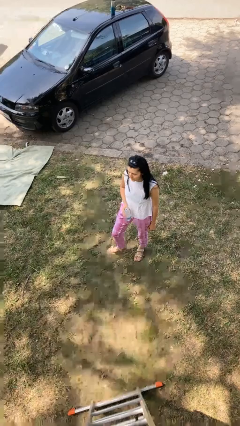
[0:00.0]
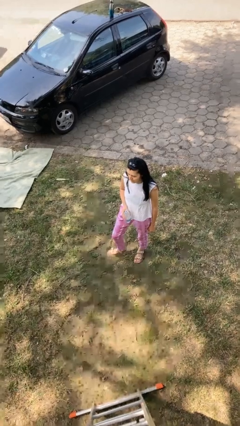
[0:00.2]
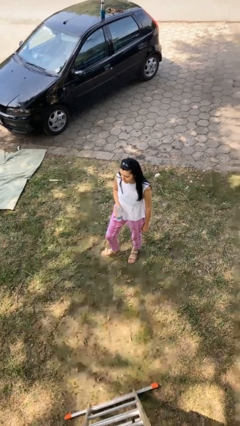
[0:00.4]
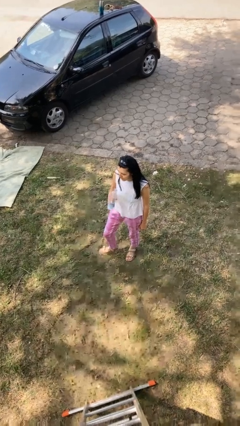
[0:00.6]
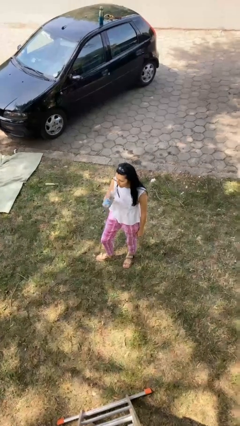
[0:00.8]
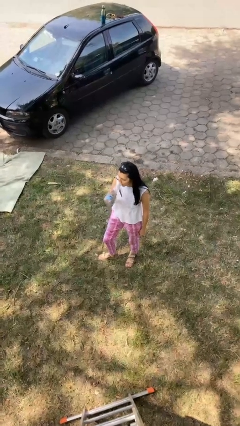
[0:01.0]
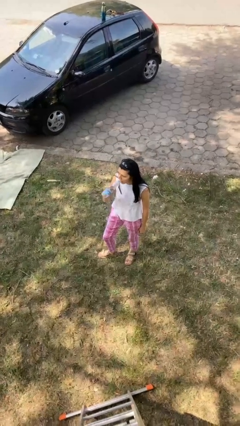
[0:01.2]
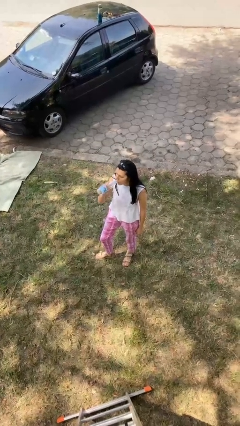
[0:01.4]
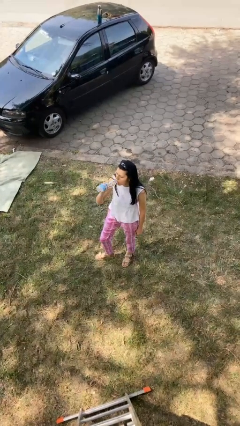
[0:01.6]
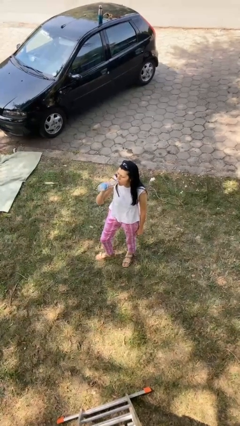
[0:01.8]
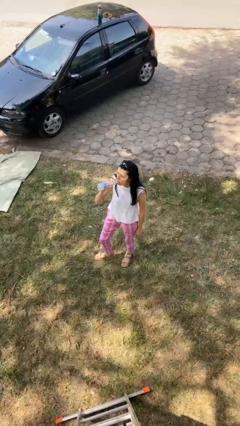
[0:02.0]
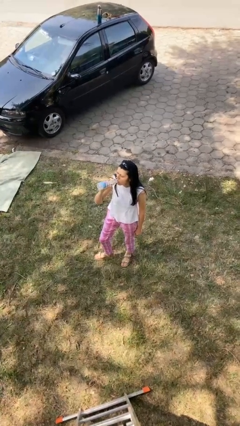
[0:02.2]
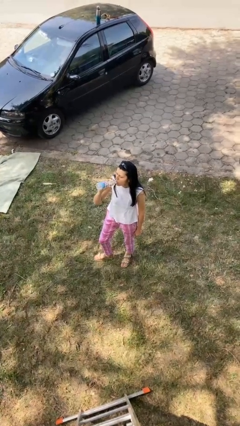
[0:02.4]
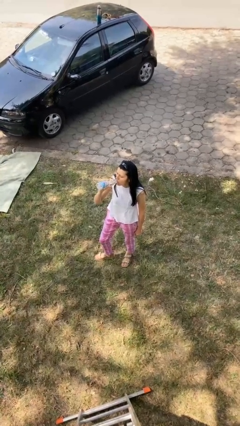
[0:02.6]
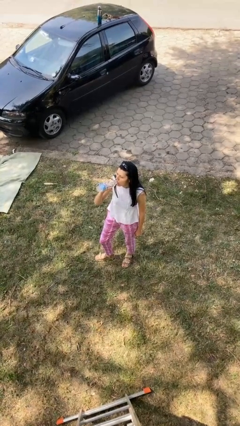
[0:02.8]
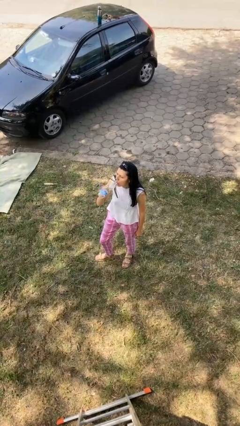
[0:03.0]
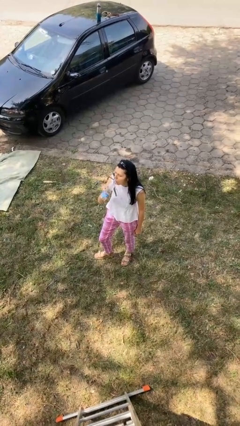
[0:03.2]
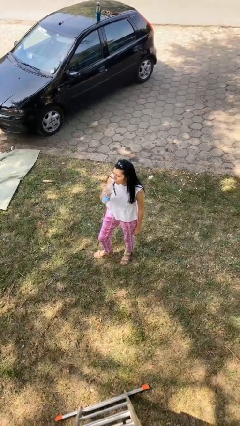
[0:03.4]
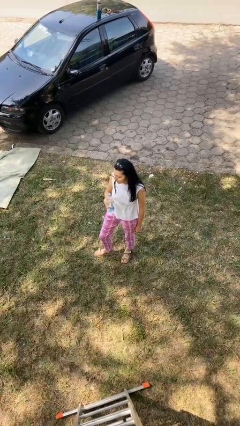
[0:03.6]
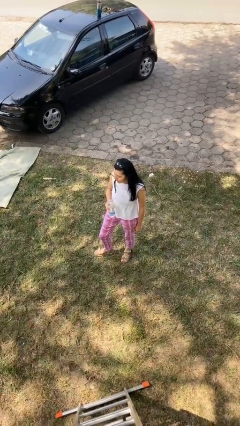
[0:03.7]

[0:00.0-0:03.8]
person drinks from bottle

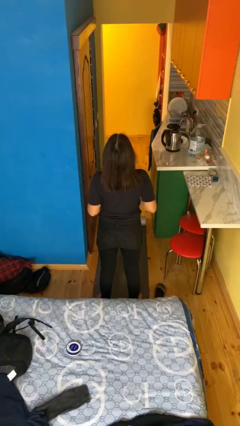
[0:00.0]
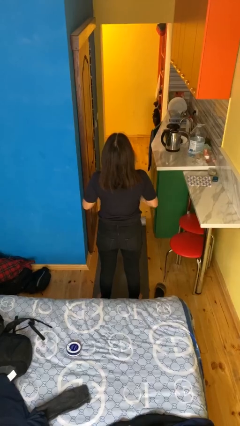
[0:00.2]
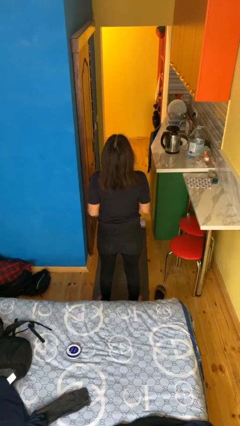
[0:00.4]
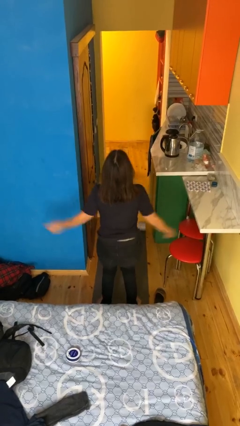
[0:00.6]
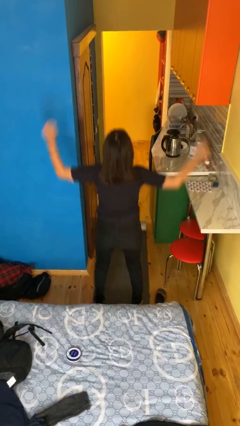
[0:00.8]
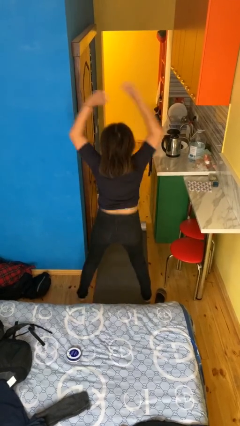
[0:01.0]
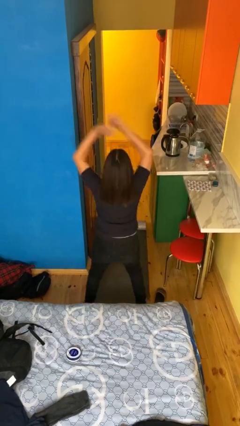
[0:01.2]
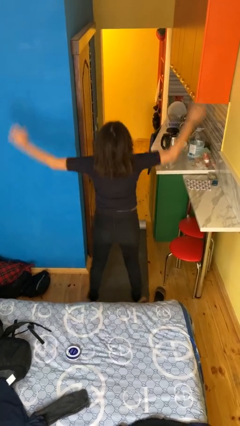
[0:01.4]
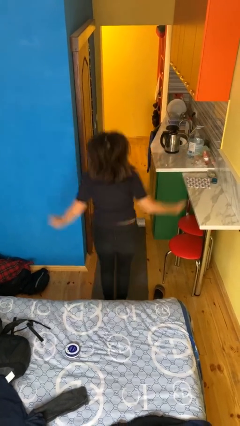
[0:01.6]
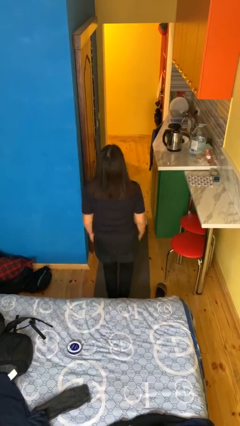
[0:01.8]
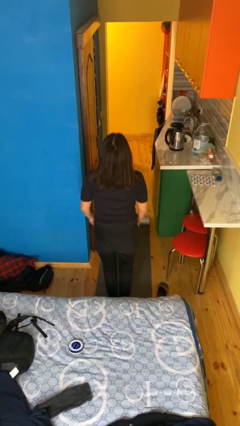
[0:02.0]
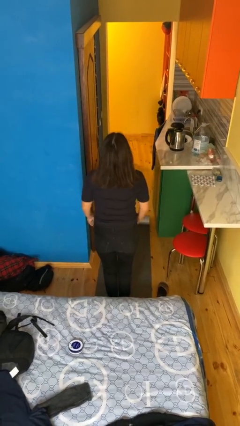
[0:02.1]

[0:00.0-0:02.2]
person exercises with jumping jacks

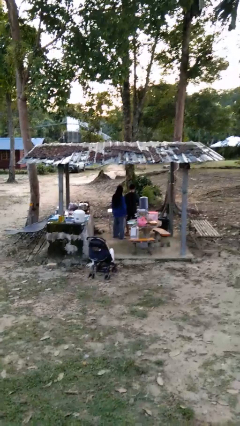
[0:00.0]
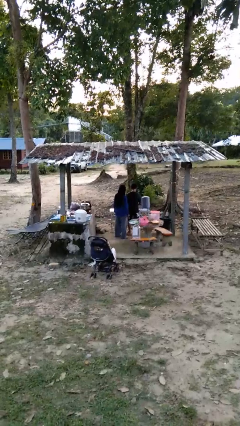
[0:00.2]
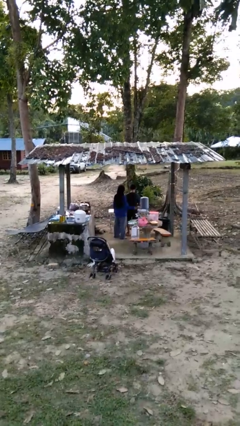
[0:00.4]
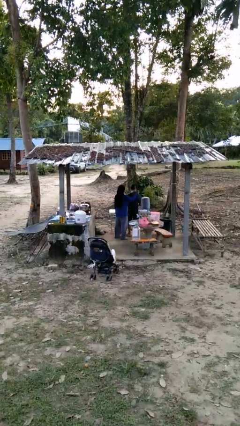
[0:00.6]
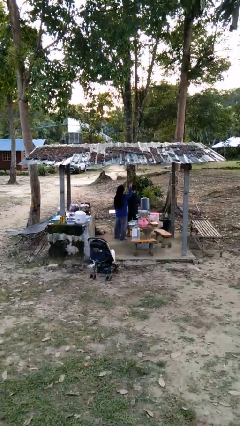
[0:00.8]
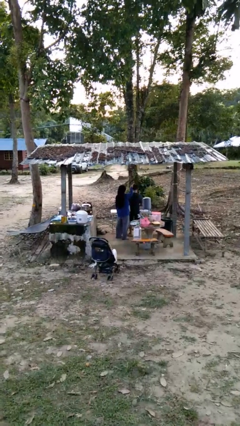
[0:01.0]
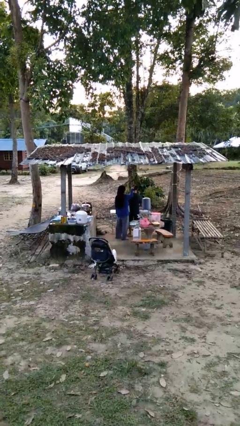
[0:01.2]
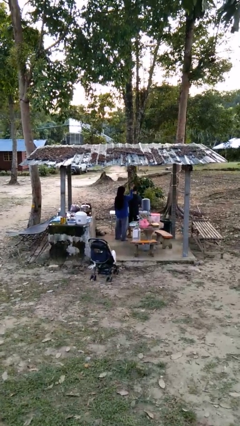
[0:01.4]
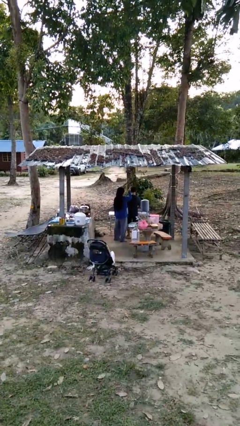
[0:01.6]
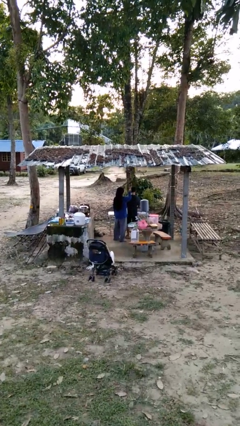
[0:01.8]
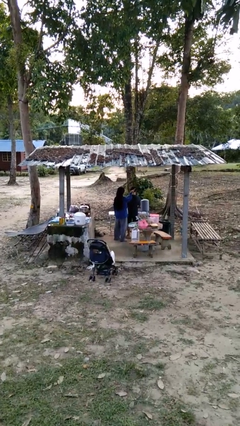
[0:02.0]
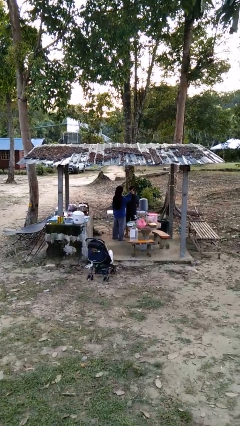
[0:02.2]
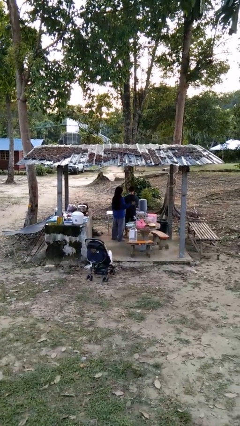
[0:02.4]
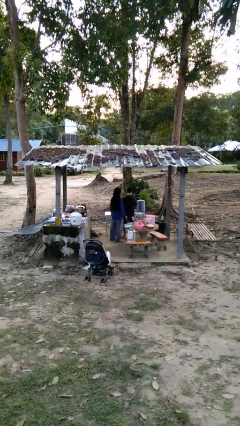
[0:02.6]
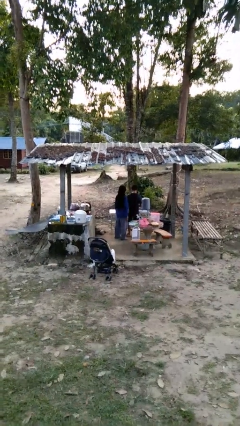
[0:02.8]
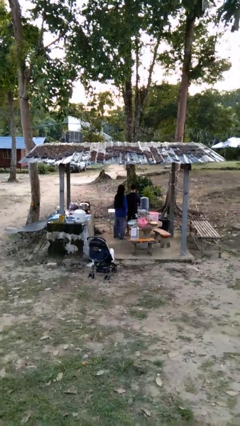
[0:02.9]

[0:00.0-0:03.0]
person brushes hair of person

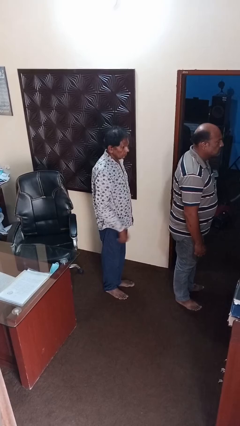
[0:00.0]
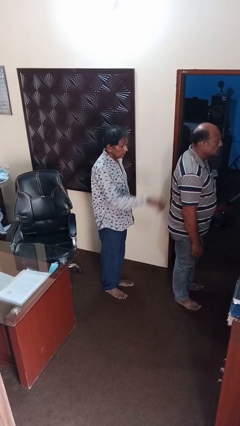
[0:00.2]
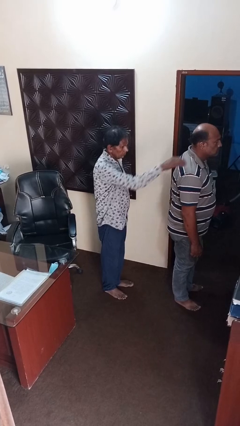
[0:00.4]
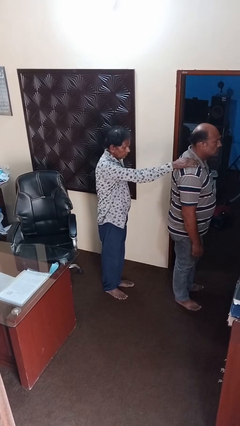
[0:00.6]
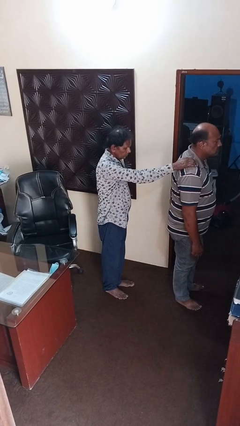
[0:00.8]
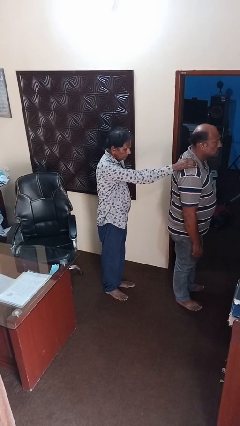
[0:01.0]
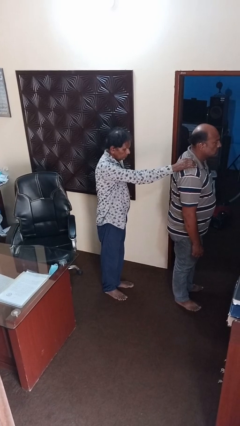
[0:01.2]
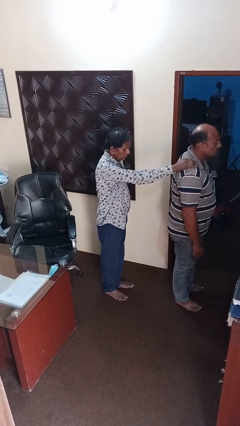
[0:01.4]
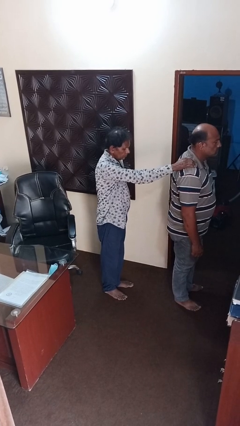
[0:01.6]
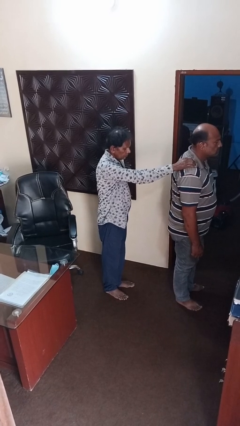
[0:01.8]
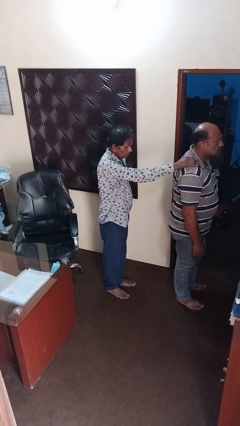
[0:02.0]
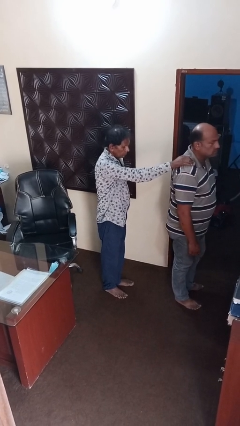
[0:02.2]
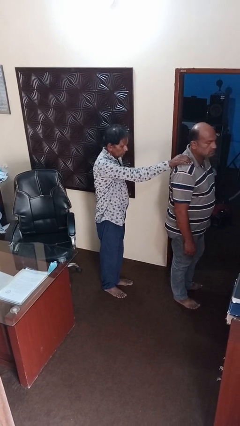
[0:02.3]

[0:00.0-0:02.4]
person grabs person by shoulder

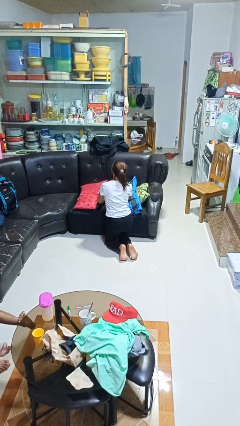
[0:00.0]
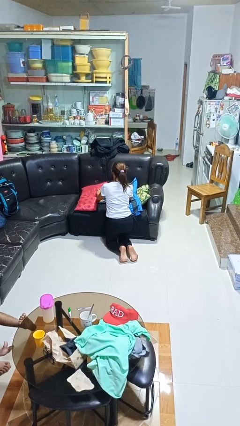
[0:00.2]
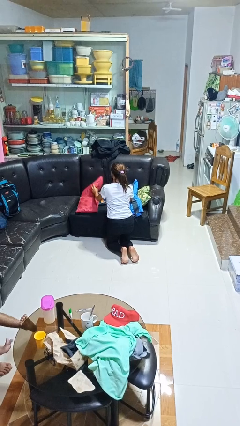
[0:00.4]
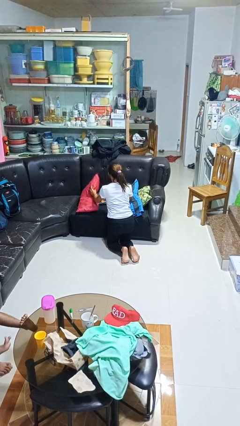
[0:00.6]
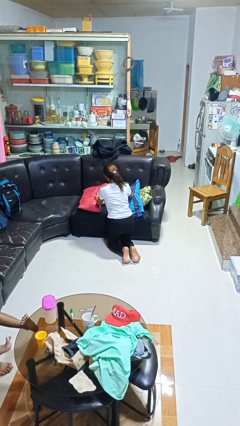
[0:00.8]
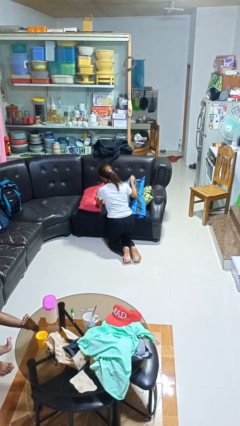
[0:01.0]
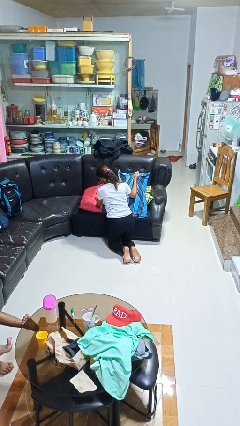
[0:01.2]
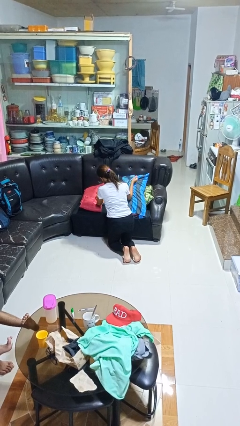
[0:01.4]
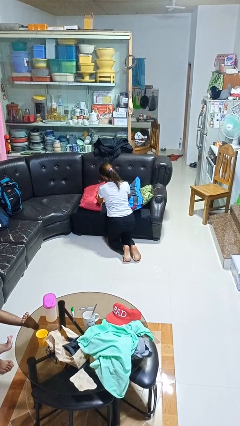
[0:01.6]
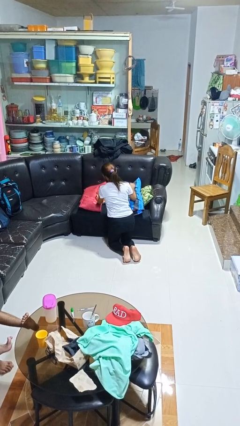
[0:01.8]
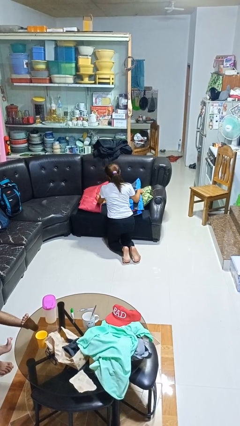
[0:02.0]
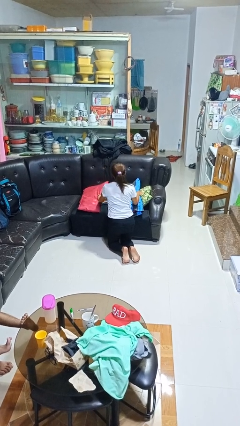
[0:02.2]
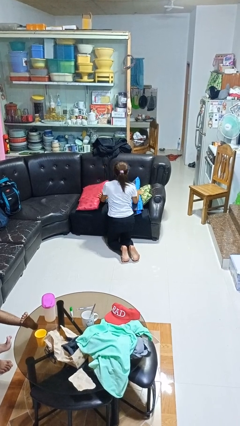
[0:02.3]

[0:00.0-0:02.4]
person searches in couch

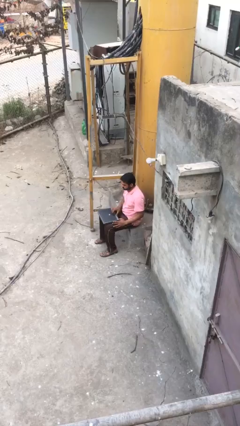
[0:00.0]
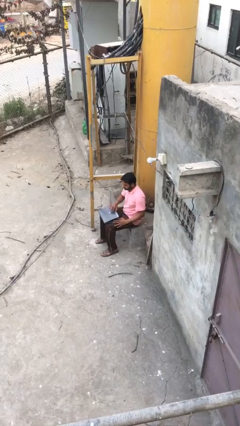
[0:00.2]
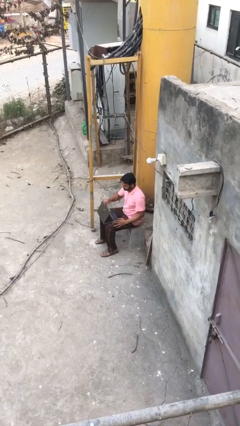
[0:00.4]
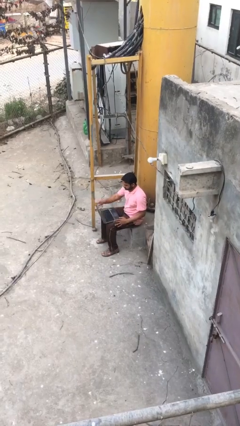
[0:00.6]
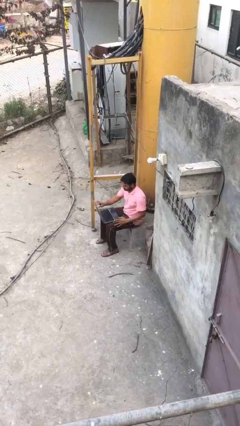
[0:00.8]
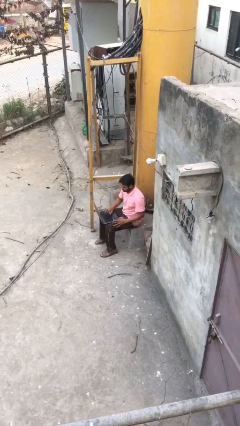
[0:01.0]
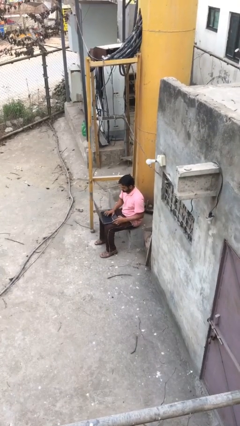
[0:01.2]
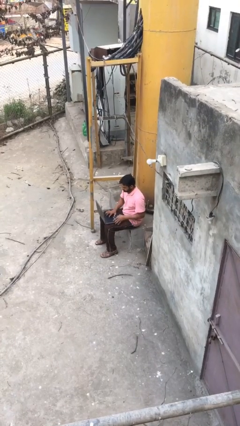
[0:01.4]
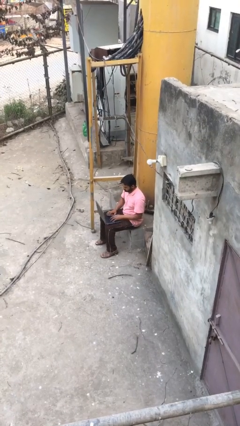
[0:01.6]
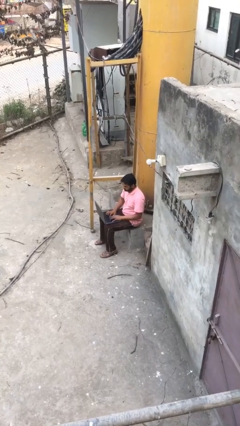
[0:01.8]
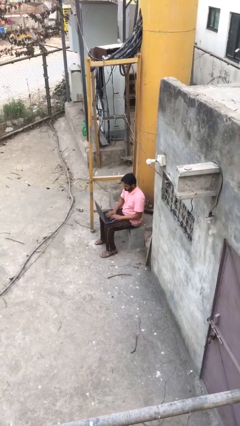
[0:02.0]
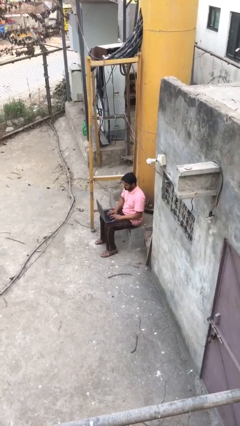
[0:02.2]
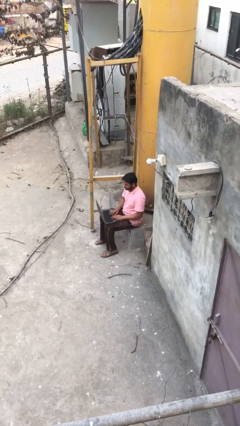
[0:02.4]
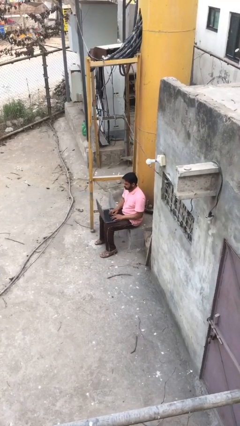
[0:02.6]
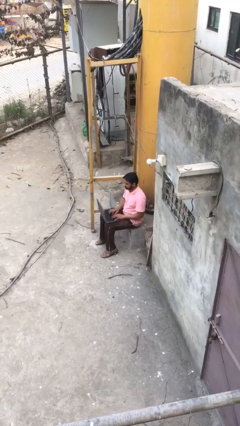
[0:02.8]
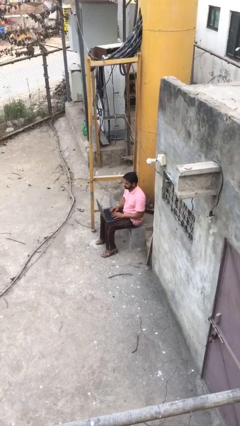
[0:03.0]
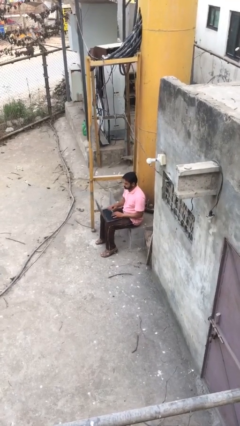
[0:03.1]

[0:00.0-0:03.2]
person interacts with laptop

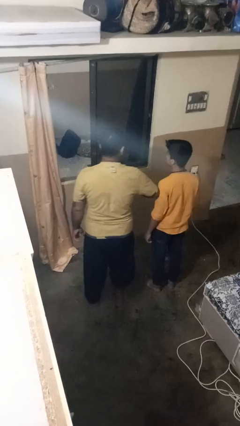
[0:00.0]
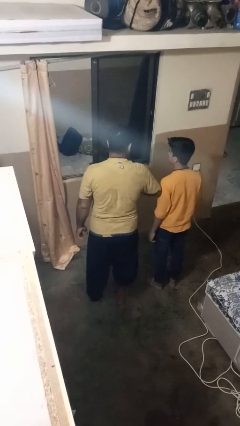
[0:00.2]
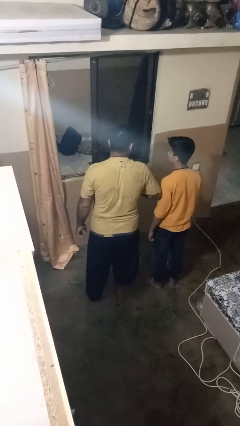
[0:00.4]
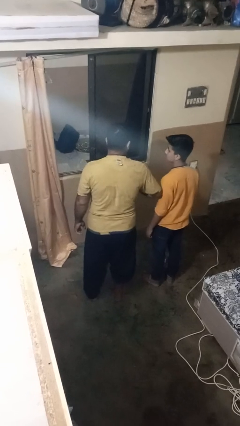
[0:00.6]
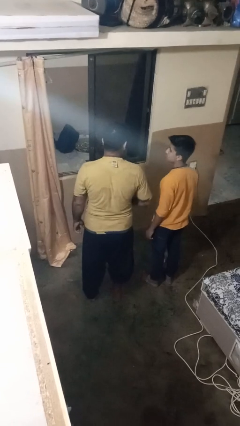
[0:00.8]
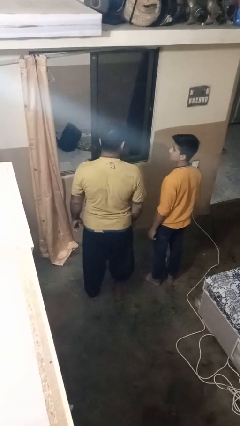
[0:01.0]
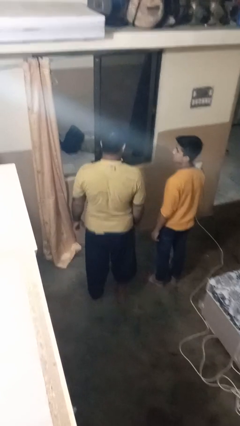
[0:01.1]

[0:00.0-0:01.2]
person nudges person with elbow
